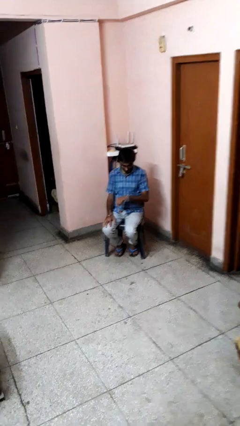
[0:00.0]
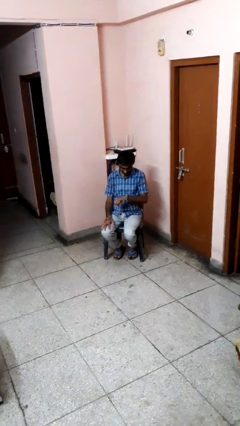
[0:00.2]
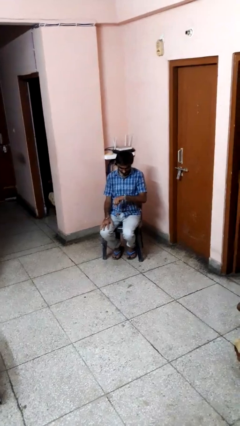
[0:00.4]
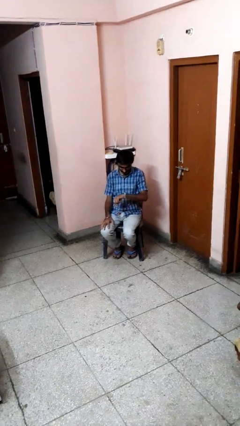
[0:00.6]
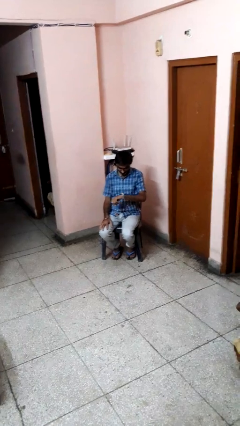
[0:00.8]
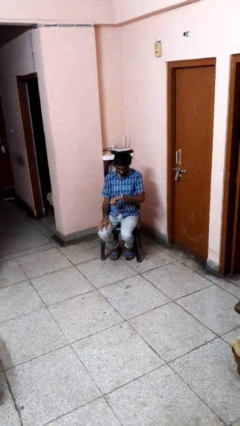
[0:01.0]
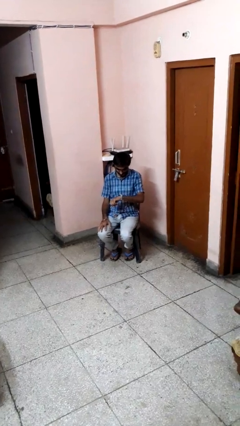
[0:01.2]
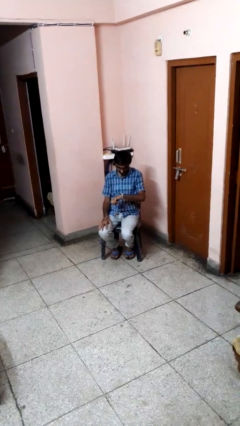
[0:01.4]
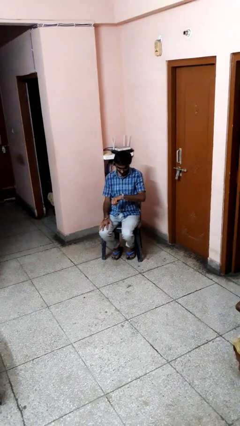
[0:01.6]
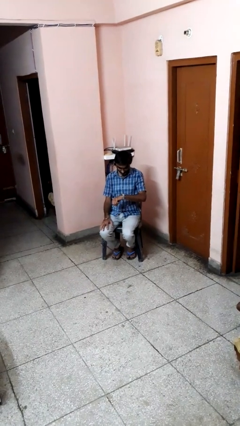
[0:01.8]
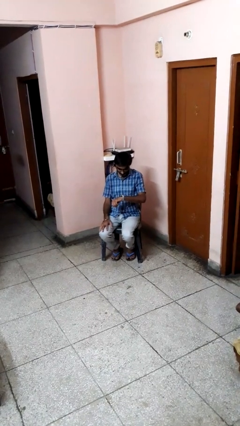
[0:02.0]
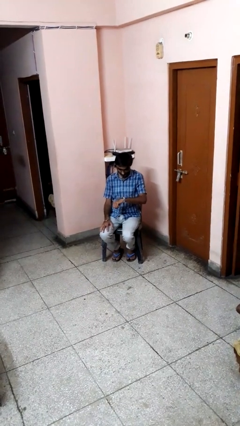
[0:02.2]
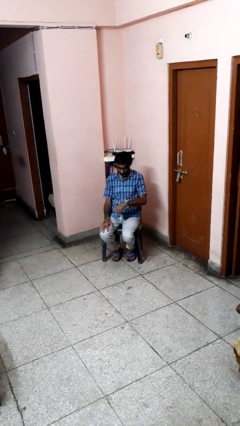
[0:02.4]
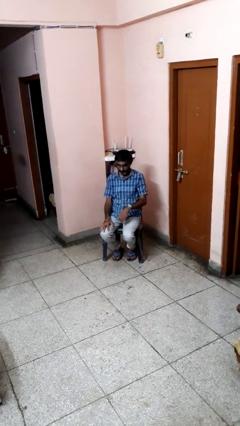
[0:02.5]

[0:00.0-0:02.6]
person looks at wristwatch

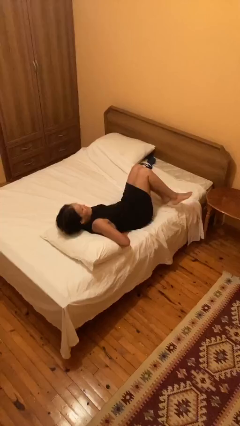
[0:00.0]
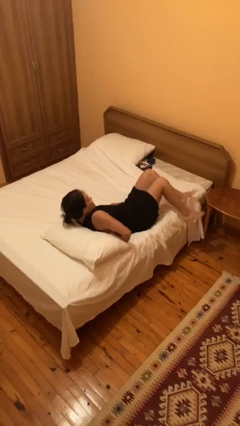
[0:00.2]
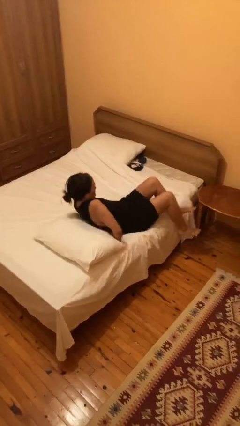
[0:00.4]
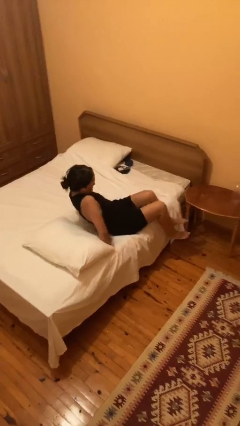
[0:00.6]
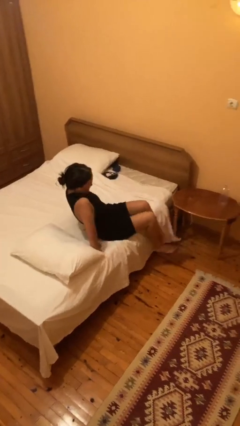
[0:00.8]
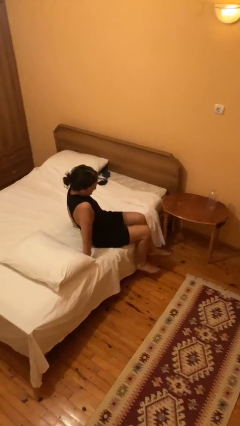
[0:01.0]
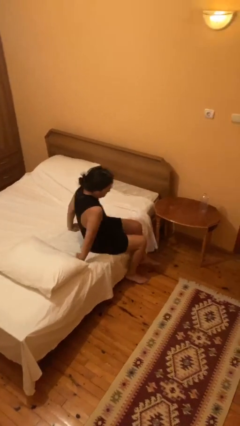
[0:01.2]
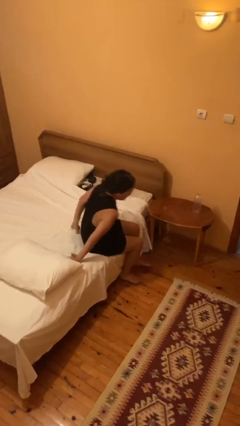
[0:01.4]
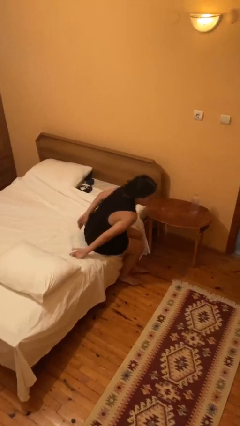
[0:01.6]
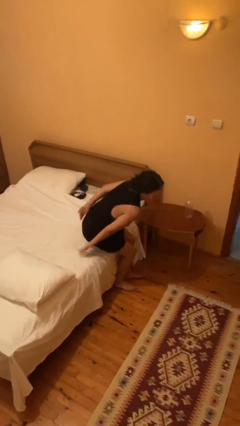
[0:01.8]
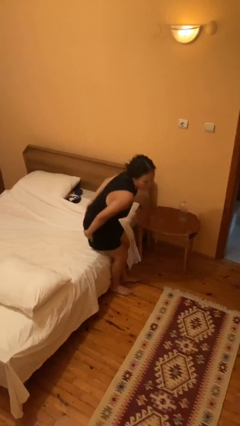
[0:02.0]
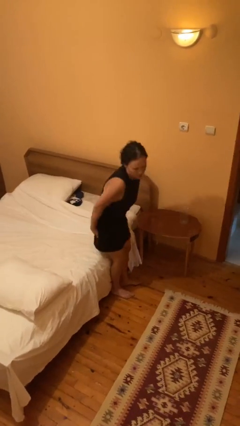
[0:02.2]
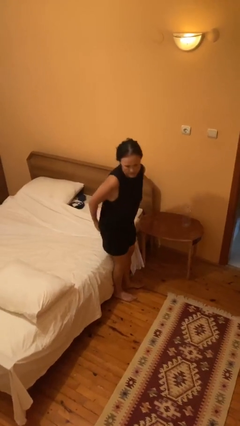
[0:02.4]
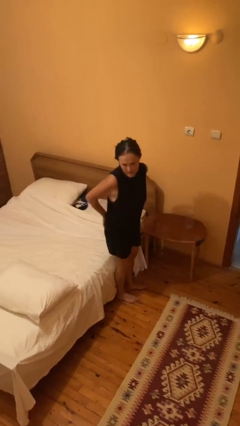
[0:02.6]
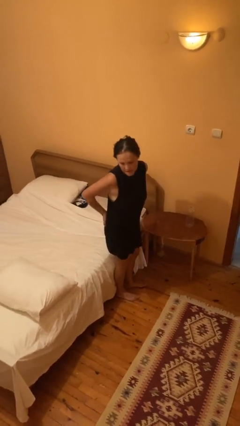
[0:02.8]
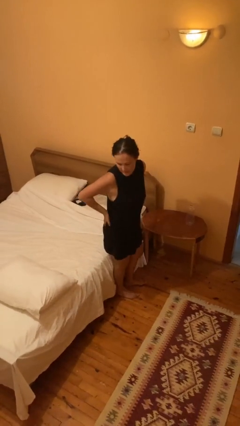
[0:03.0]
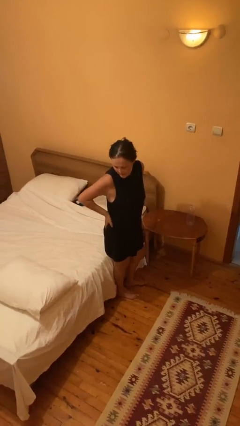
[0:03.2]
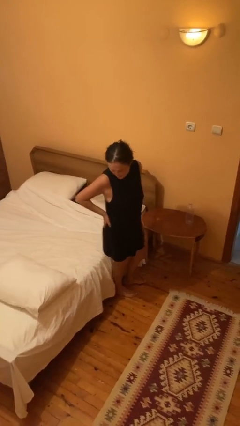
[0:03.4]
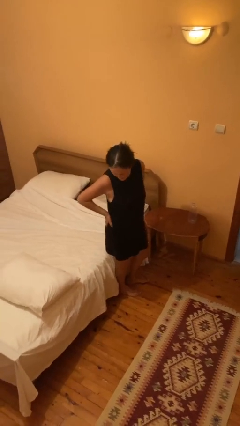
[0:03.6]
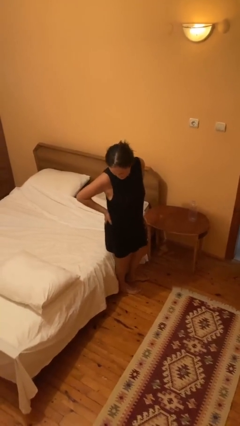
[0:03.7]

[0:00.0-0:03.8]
person stands up

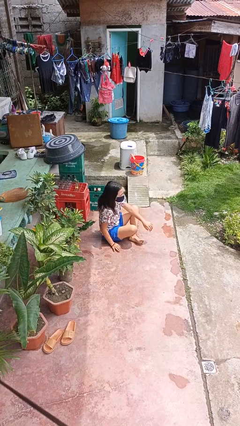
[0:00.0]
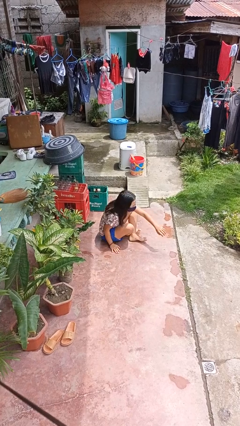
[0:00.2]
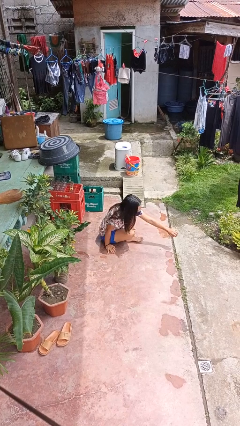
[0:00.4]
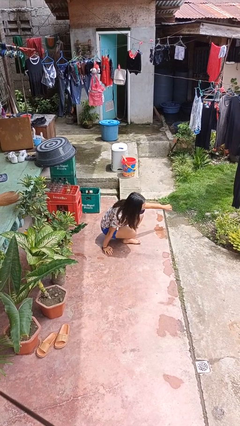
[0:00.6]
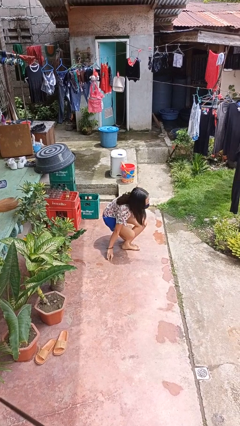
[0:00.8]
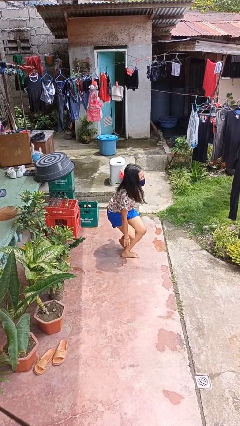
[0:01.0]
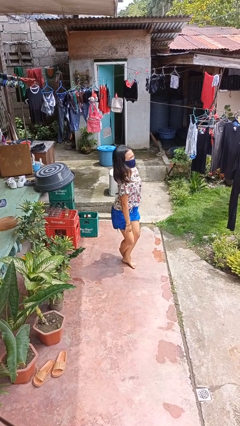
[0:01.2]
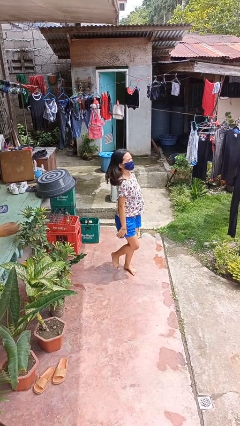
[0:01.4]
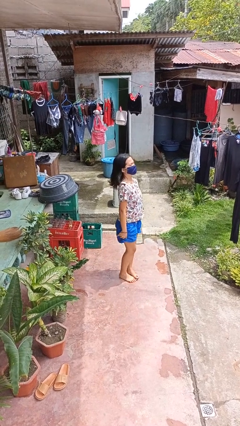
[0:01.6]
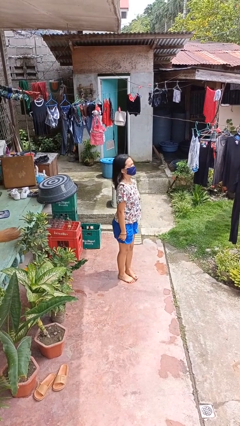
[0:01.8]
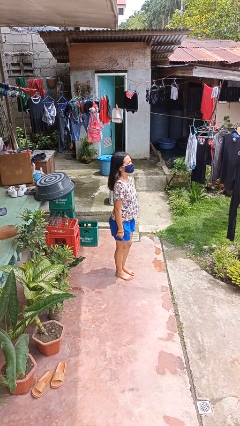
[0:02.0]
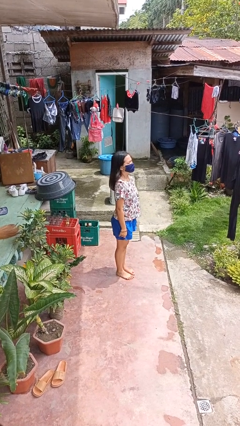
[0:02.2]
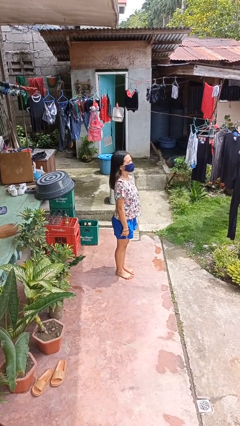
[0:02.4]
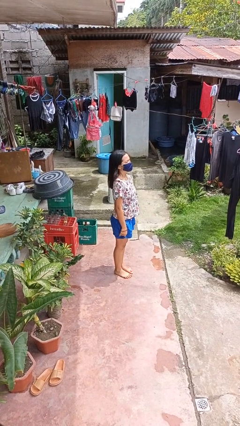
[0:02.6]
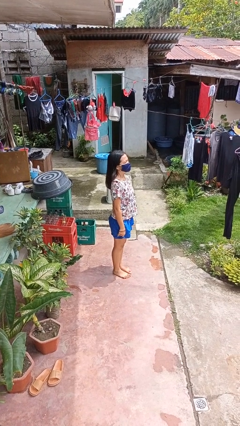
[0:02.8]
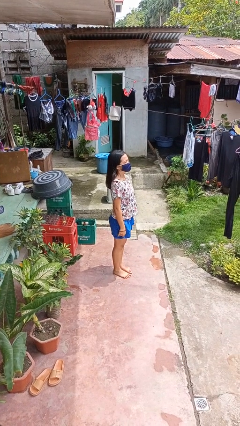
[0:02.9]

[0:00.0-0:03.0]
person stands up from floor

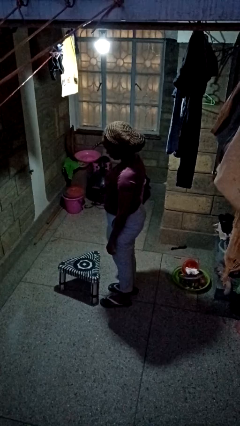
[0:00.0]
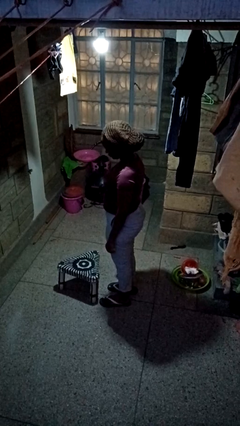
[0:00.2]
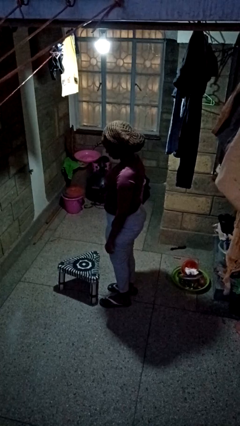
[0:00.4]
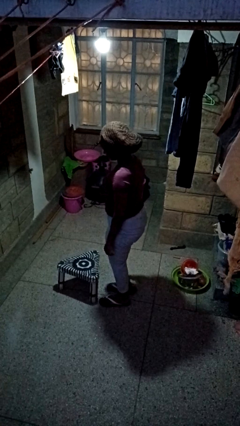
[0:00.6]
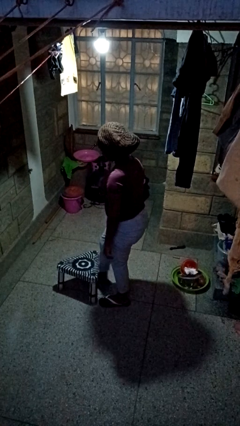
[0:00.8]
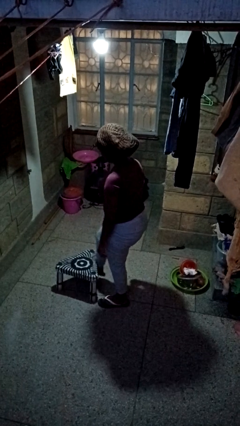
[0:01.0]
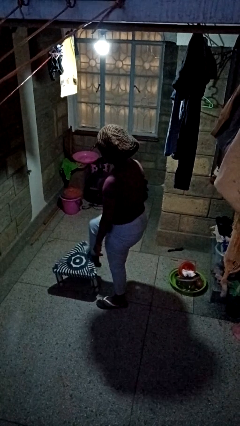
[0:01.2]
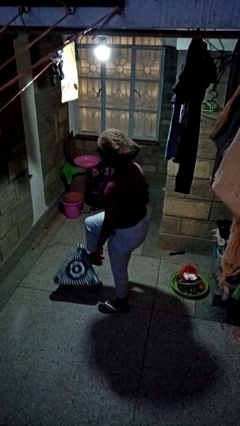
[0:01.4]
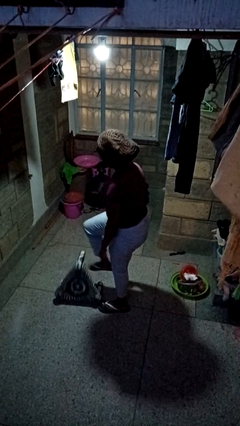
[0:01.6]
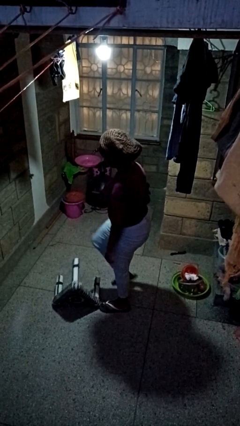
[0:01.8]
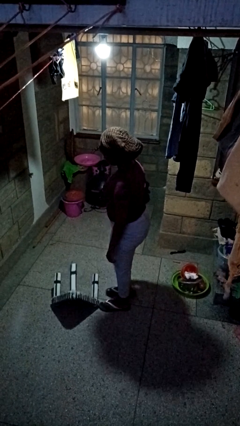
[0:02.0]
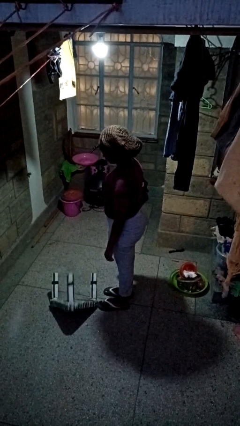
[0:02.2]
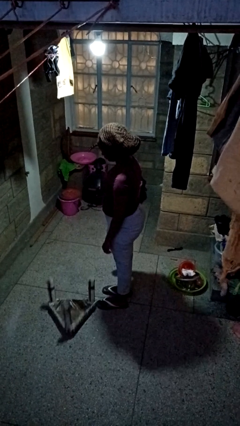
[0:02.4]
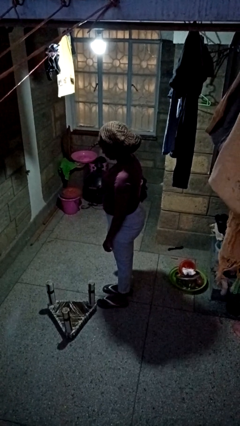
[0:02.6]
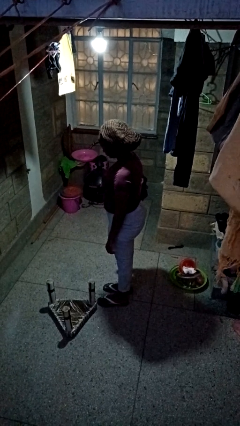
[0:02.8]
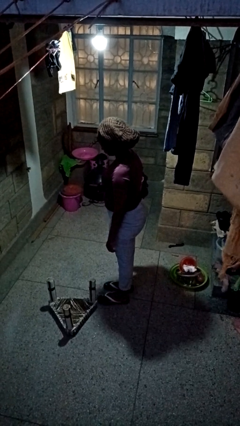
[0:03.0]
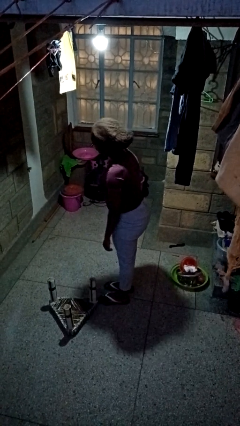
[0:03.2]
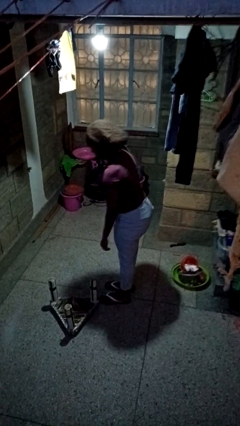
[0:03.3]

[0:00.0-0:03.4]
person knocks over furniture

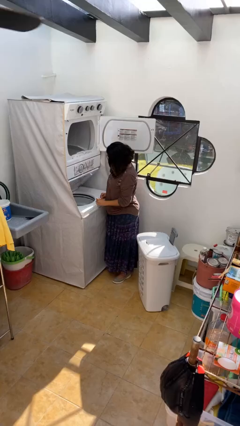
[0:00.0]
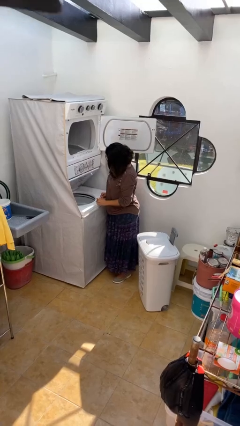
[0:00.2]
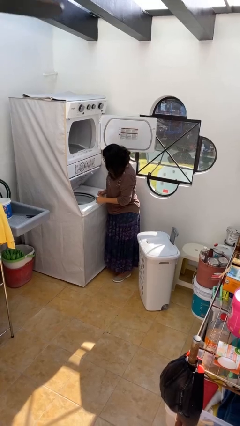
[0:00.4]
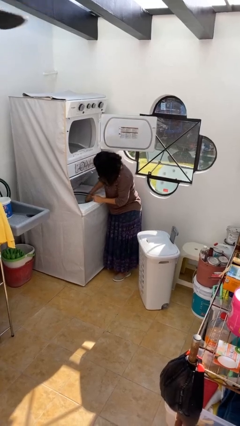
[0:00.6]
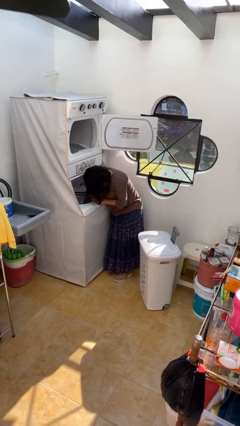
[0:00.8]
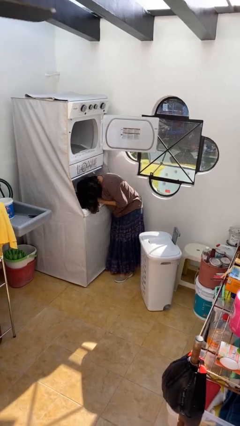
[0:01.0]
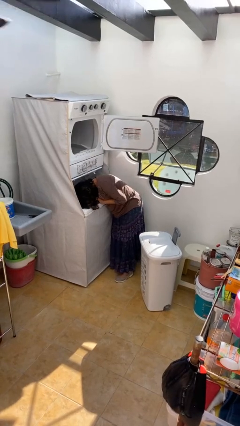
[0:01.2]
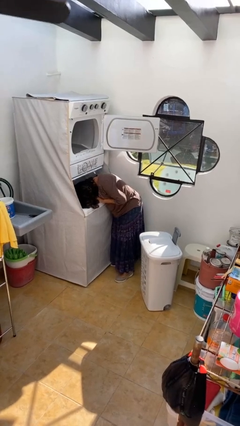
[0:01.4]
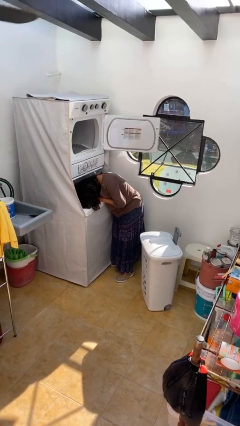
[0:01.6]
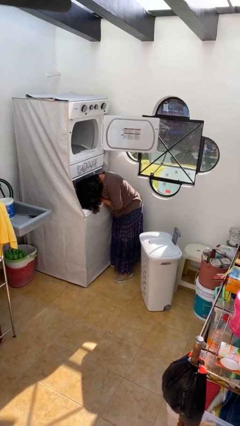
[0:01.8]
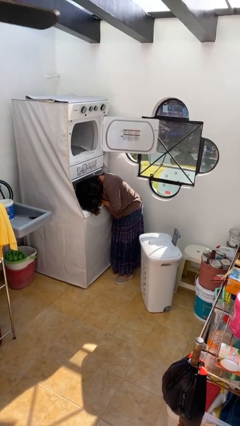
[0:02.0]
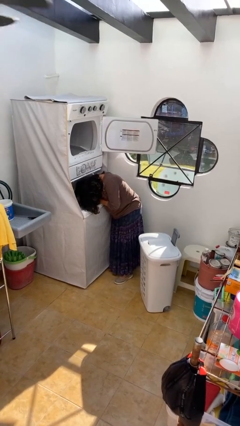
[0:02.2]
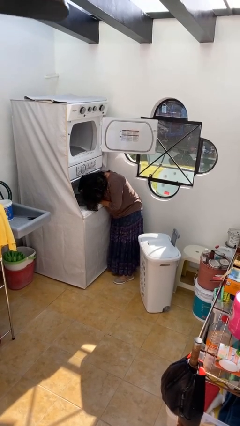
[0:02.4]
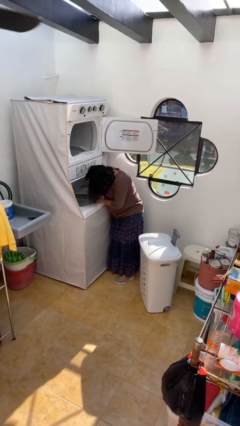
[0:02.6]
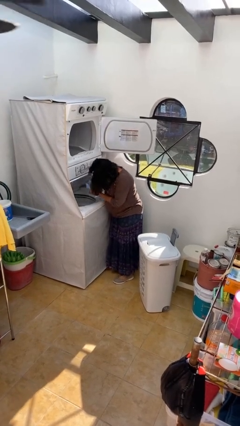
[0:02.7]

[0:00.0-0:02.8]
person unloads clotheswasher

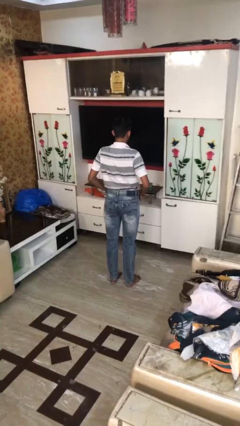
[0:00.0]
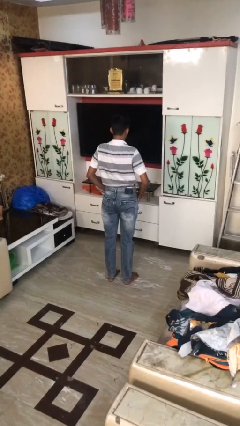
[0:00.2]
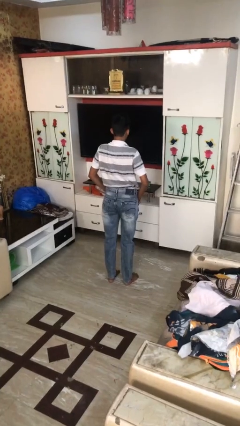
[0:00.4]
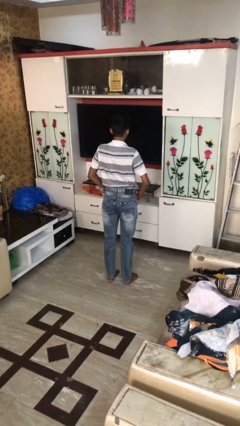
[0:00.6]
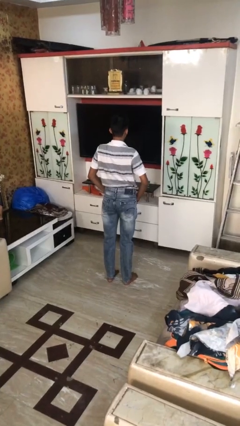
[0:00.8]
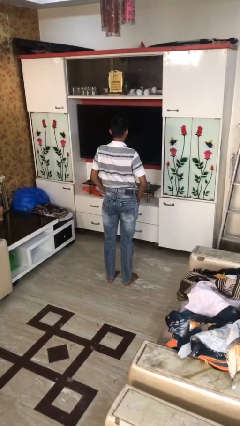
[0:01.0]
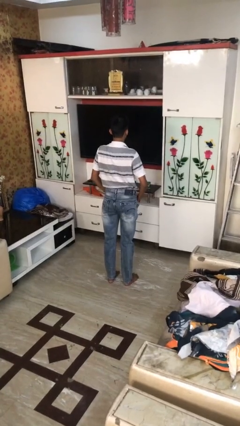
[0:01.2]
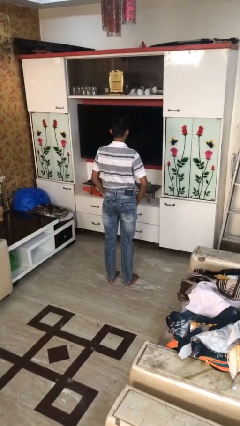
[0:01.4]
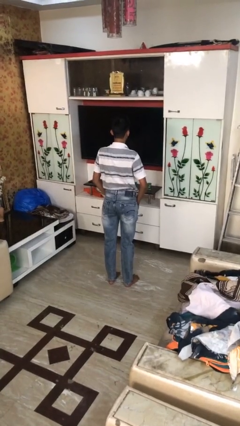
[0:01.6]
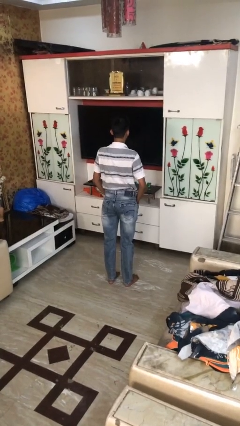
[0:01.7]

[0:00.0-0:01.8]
person puts hands in back pockets
